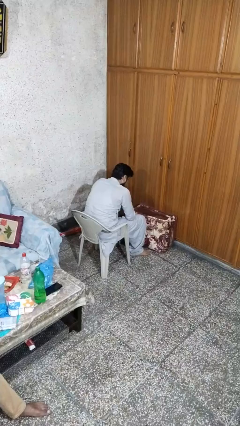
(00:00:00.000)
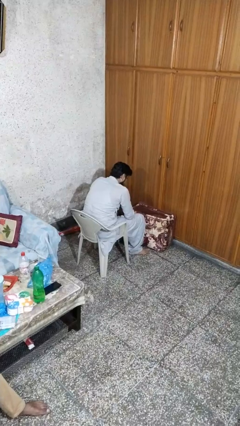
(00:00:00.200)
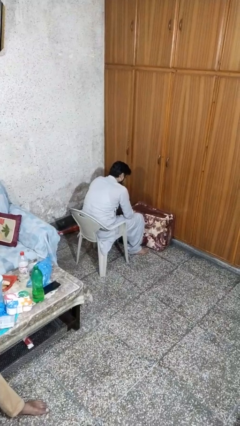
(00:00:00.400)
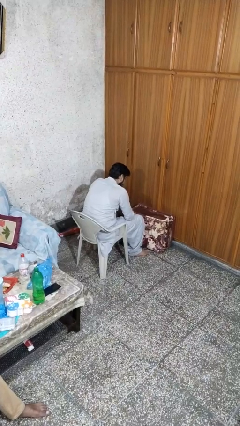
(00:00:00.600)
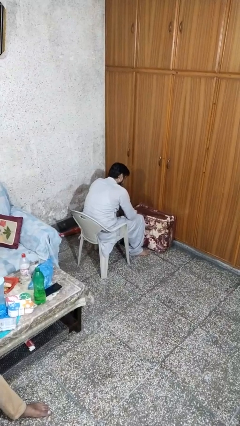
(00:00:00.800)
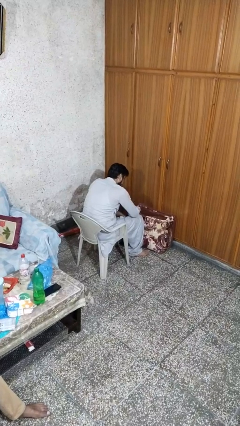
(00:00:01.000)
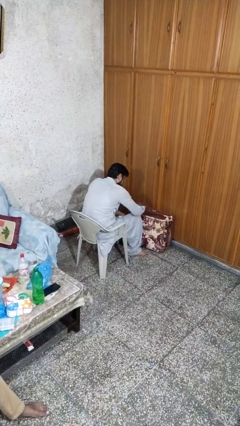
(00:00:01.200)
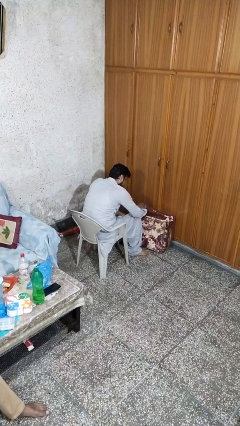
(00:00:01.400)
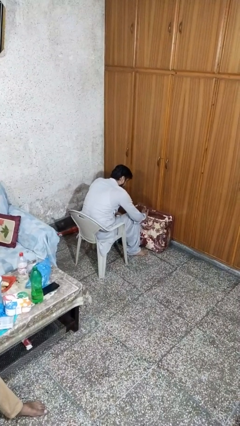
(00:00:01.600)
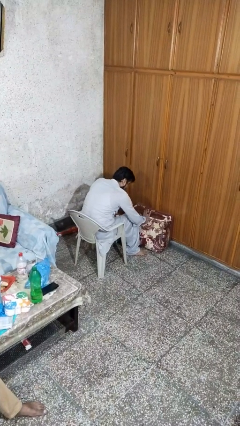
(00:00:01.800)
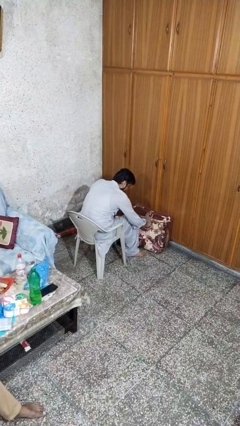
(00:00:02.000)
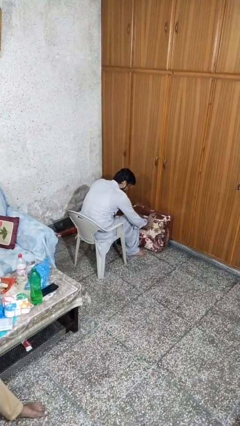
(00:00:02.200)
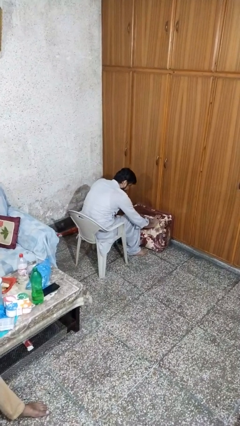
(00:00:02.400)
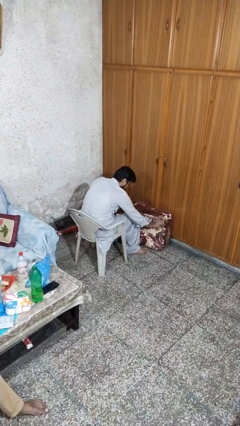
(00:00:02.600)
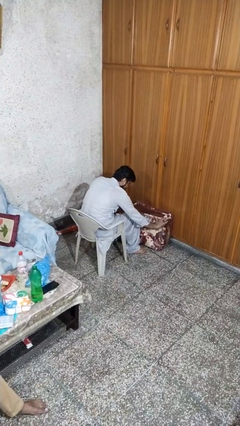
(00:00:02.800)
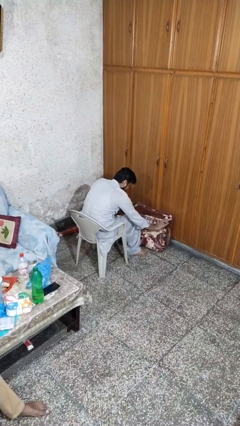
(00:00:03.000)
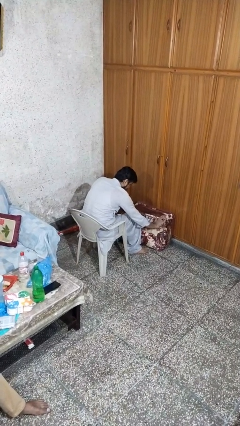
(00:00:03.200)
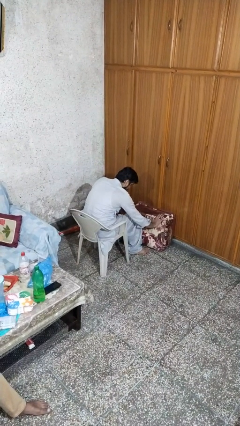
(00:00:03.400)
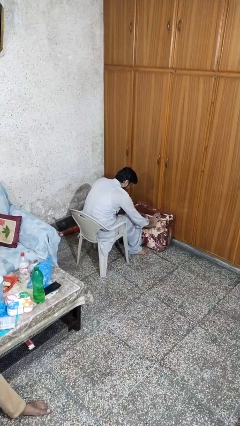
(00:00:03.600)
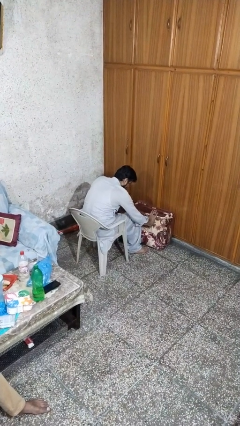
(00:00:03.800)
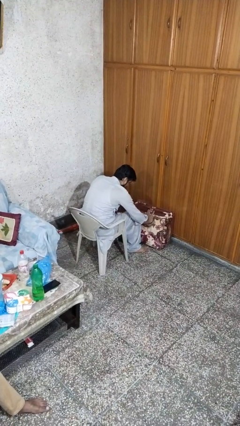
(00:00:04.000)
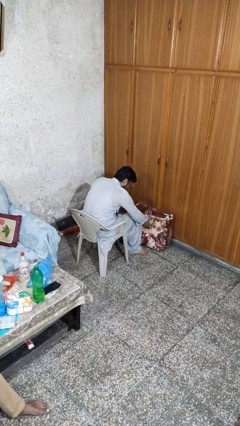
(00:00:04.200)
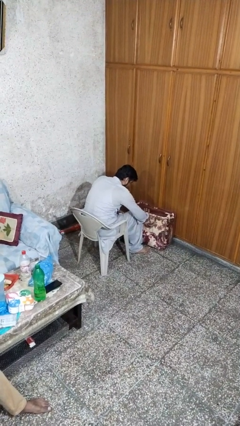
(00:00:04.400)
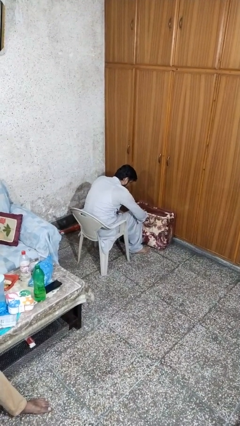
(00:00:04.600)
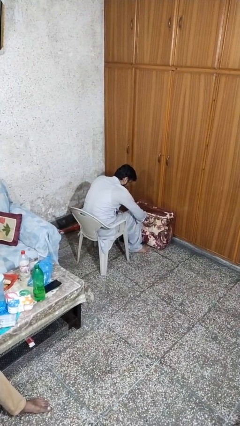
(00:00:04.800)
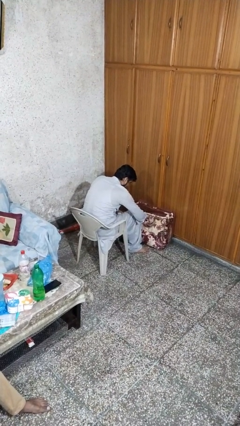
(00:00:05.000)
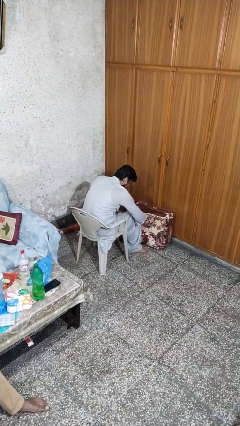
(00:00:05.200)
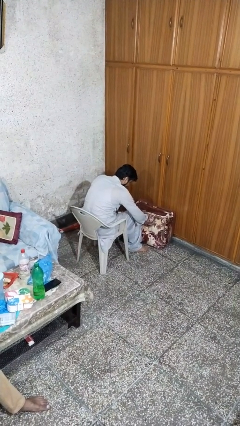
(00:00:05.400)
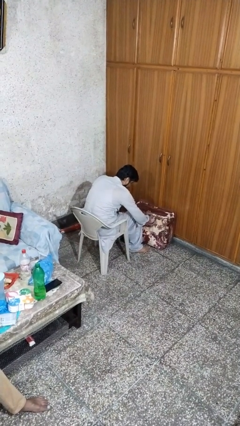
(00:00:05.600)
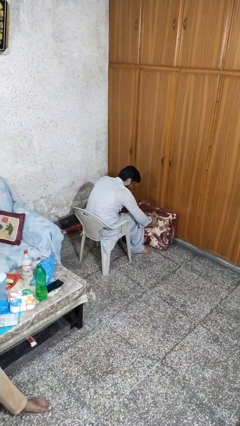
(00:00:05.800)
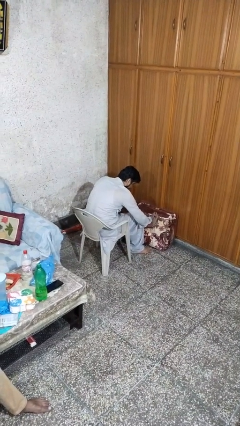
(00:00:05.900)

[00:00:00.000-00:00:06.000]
person waves hand over object

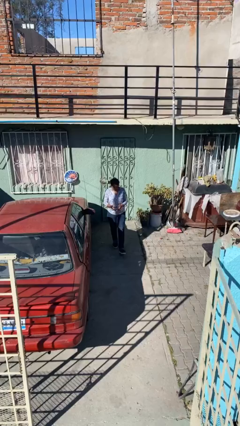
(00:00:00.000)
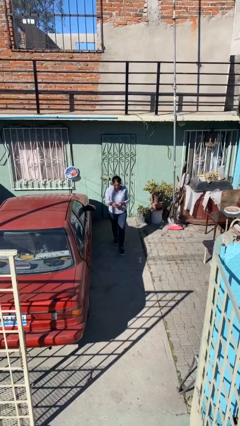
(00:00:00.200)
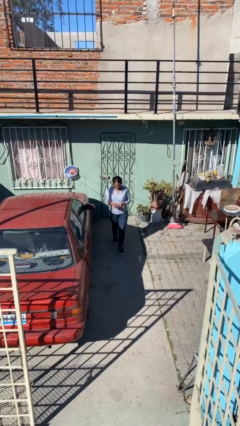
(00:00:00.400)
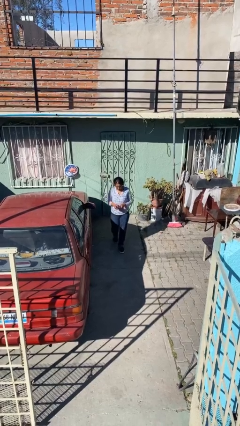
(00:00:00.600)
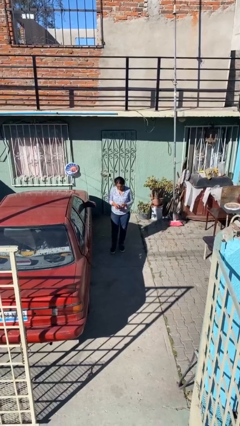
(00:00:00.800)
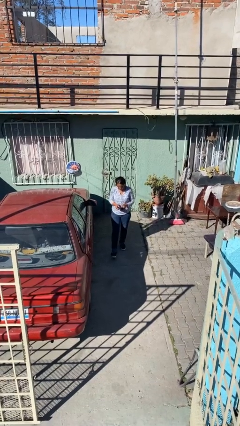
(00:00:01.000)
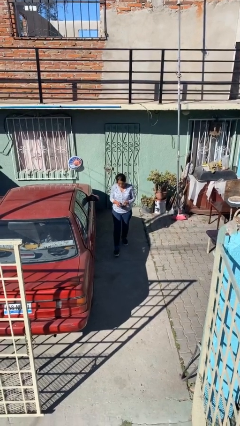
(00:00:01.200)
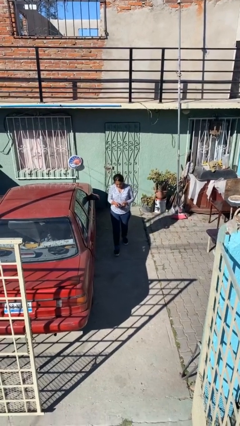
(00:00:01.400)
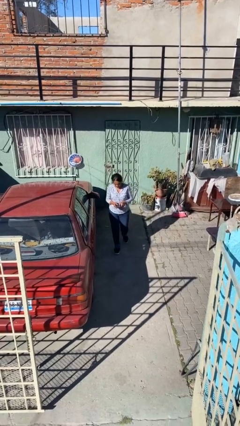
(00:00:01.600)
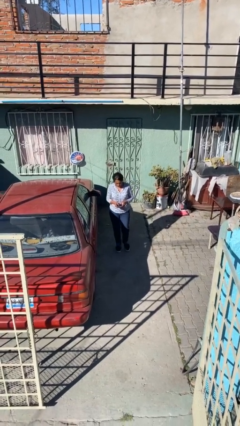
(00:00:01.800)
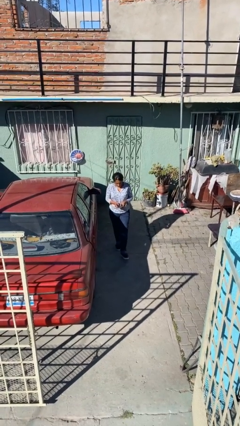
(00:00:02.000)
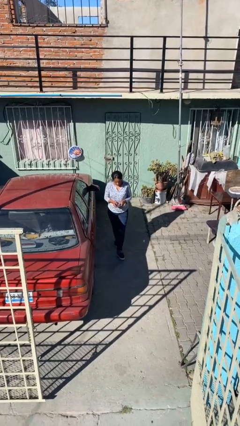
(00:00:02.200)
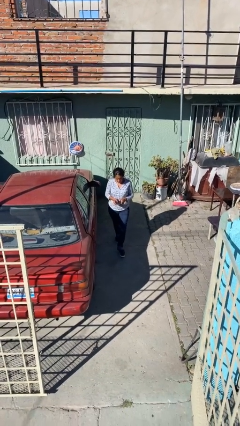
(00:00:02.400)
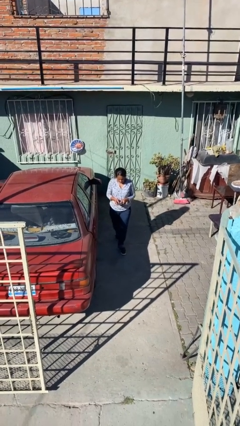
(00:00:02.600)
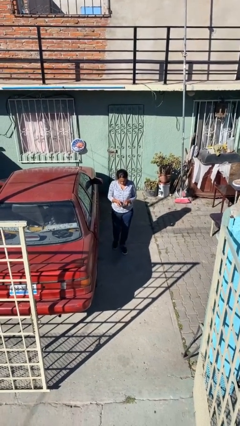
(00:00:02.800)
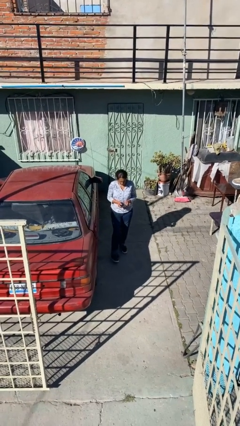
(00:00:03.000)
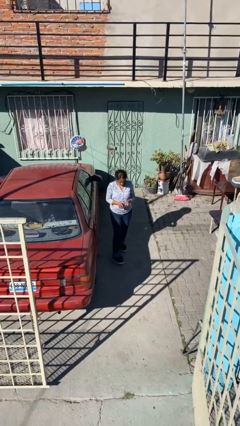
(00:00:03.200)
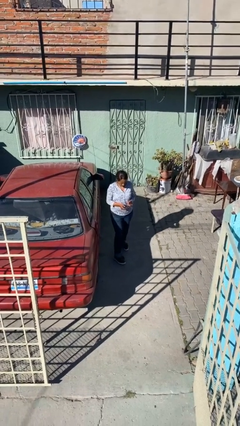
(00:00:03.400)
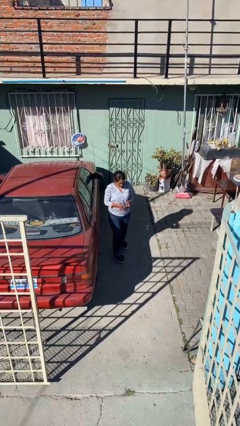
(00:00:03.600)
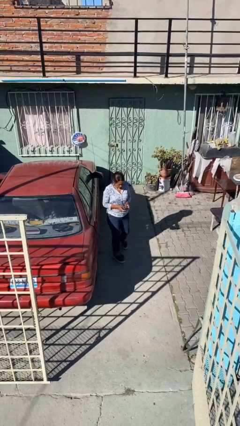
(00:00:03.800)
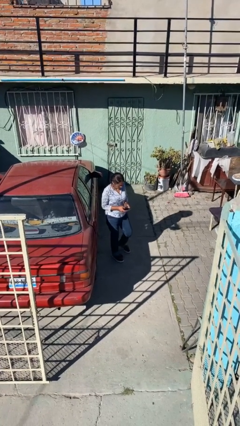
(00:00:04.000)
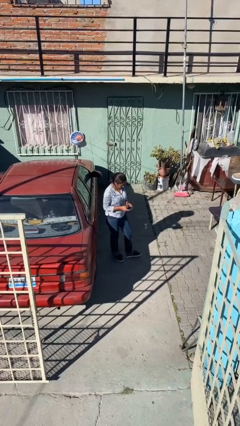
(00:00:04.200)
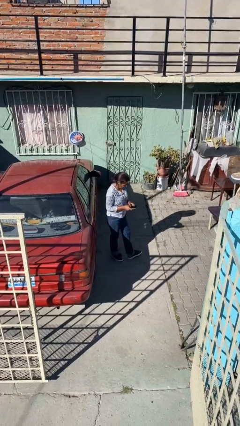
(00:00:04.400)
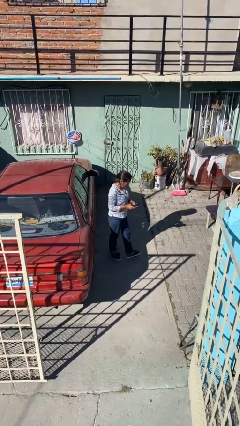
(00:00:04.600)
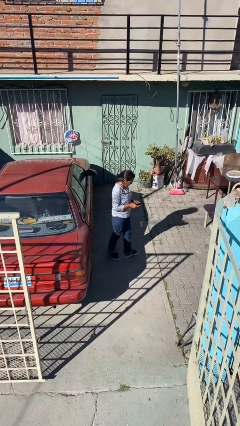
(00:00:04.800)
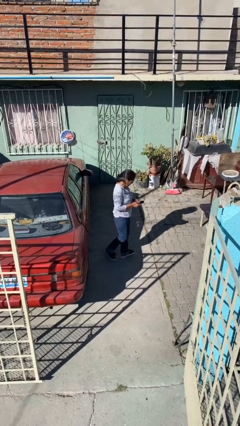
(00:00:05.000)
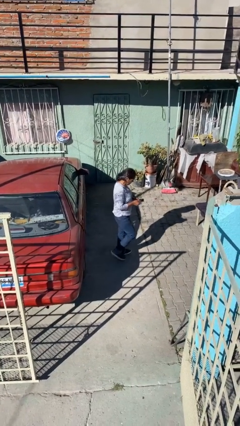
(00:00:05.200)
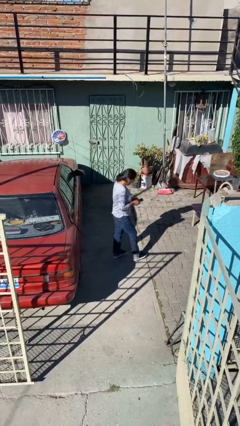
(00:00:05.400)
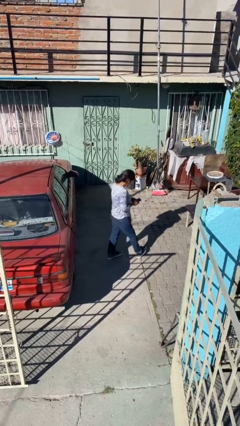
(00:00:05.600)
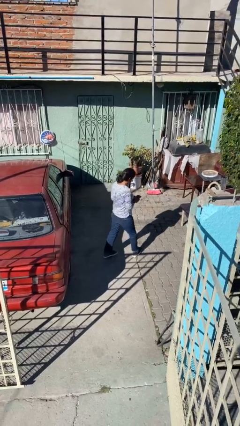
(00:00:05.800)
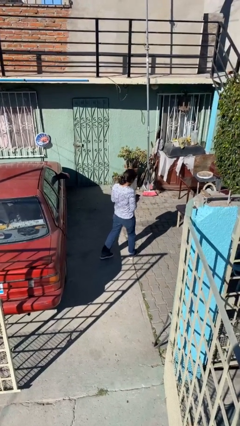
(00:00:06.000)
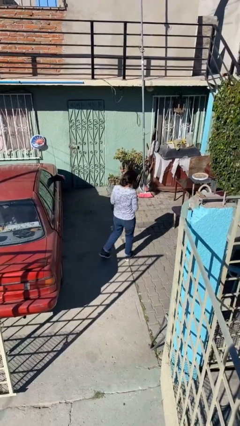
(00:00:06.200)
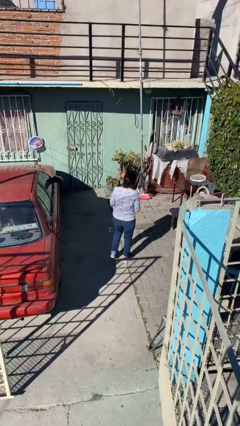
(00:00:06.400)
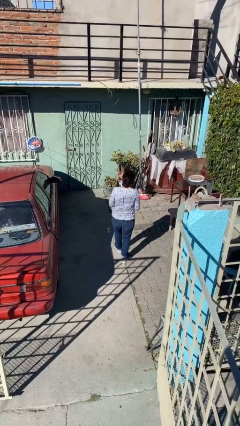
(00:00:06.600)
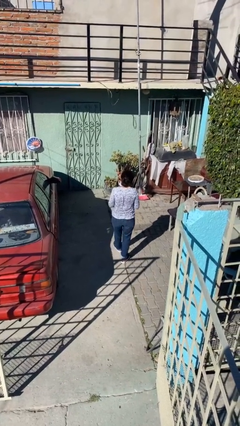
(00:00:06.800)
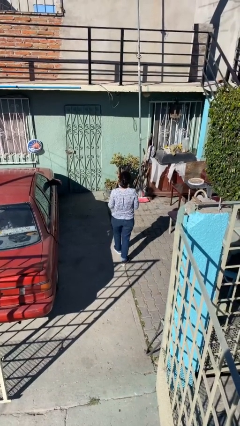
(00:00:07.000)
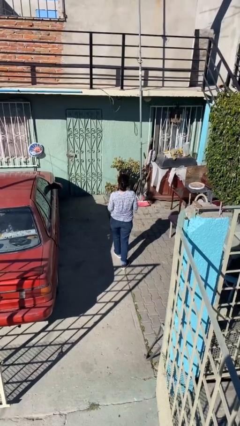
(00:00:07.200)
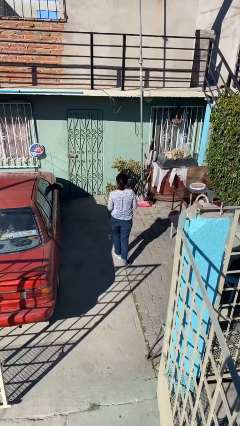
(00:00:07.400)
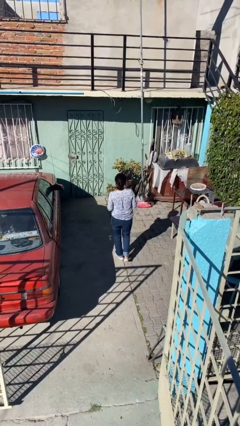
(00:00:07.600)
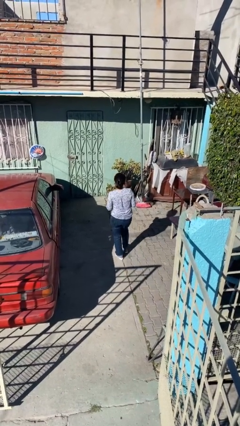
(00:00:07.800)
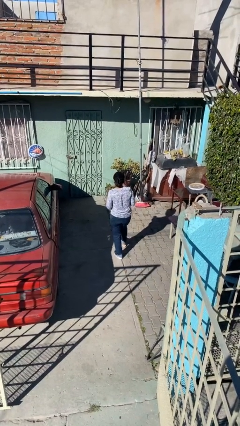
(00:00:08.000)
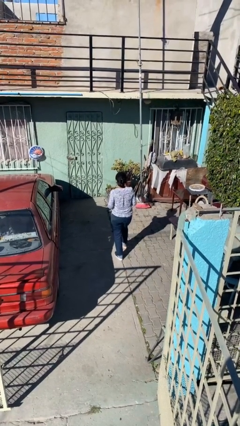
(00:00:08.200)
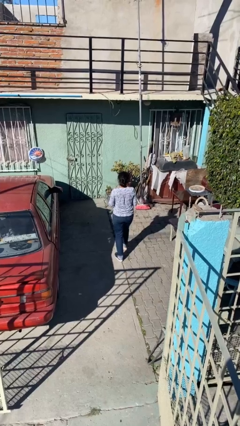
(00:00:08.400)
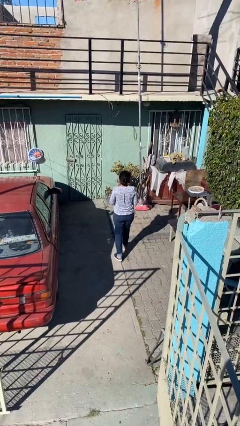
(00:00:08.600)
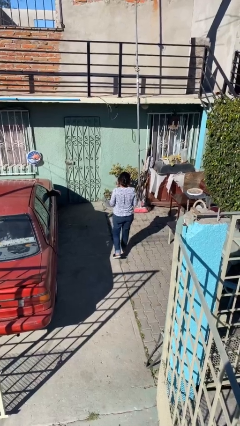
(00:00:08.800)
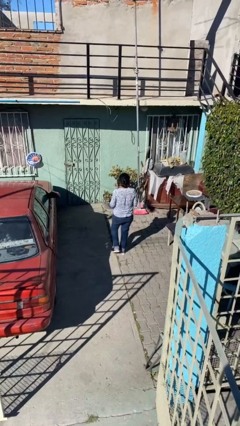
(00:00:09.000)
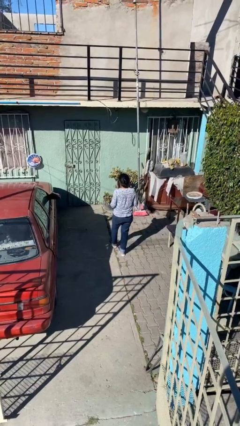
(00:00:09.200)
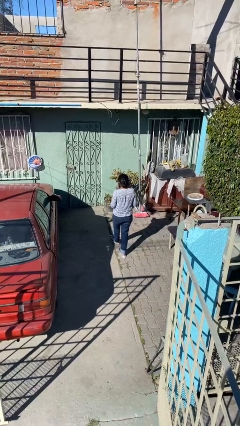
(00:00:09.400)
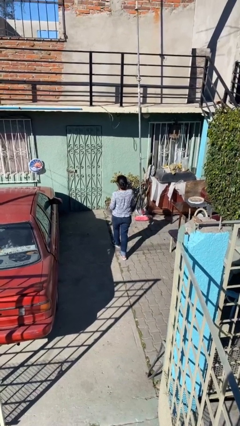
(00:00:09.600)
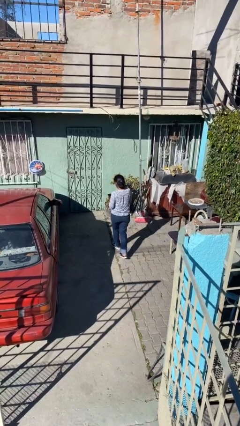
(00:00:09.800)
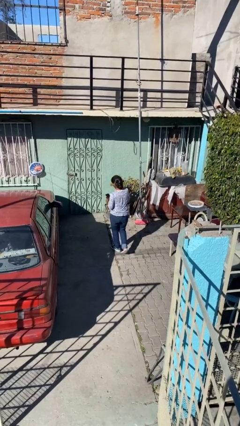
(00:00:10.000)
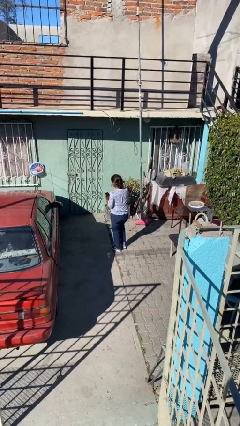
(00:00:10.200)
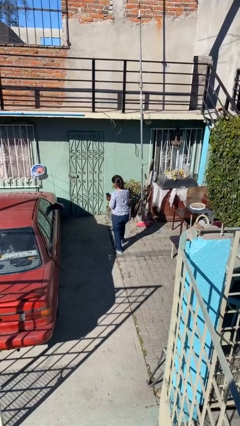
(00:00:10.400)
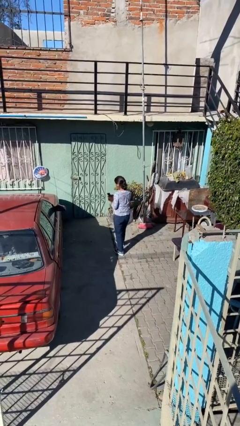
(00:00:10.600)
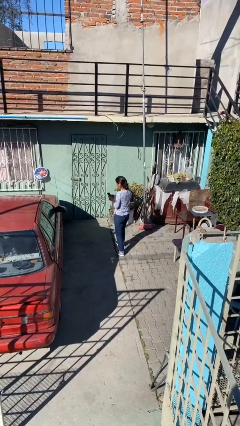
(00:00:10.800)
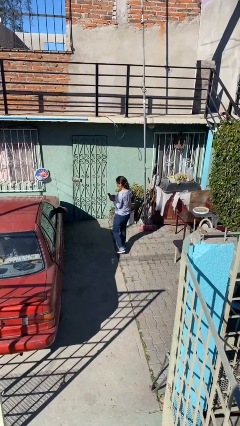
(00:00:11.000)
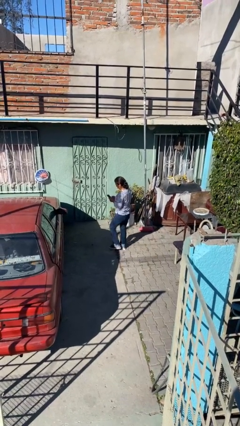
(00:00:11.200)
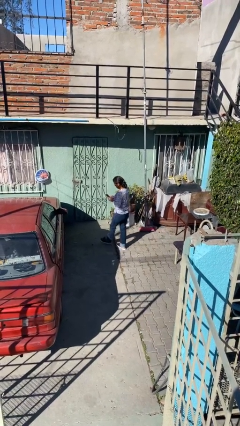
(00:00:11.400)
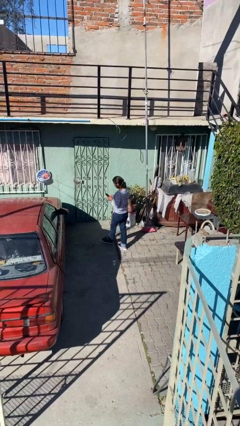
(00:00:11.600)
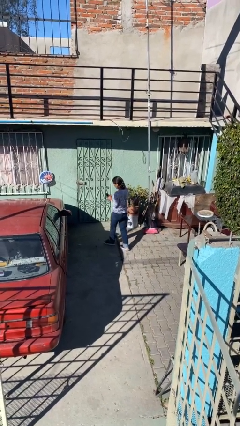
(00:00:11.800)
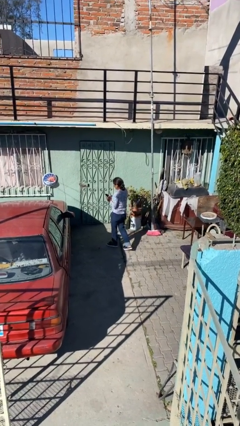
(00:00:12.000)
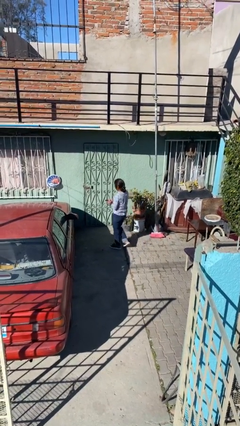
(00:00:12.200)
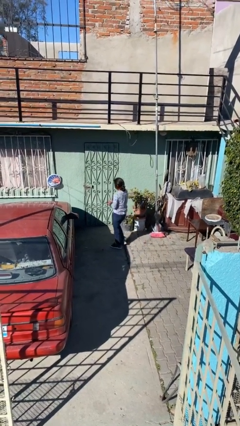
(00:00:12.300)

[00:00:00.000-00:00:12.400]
person texts on phone
